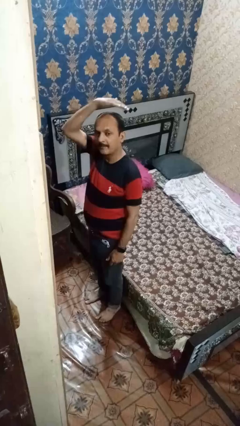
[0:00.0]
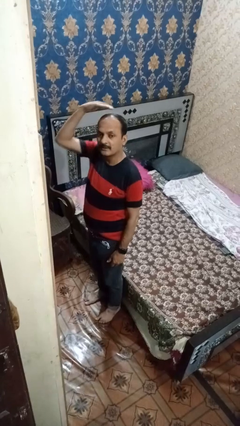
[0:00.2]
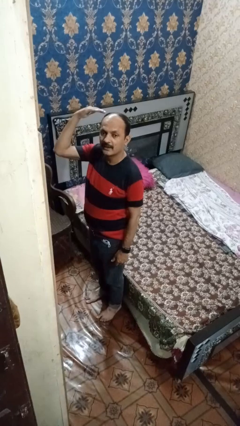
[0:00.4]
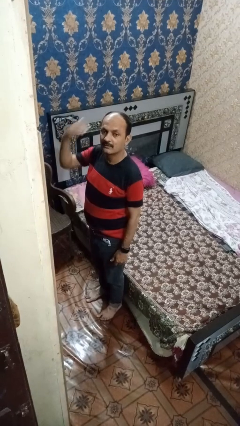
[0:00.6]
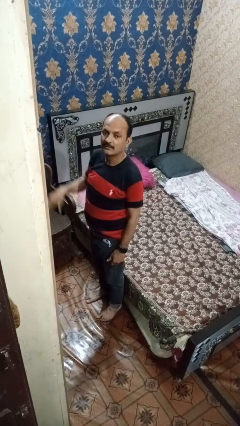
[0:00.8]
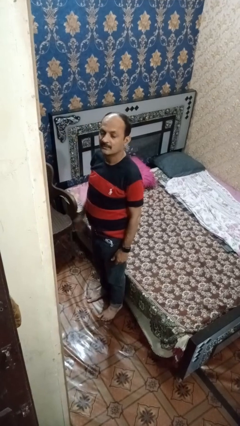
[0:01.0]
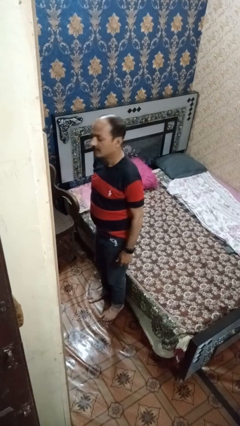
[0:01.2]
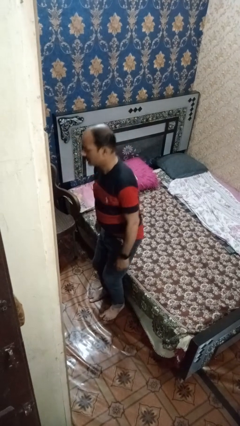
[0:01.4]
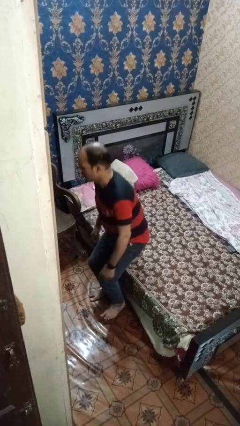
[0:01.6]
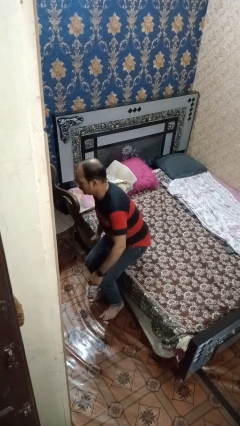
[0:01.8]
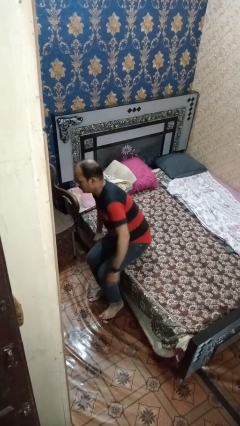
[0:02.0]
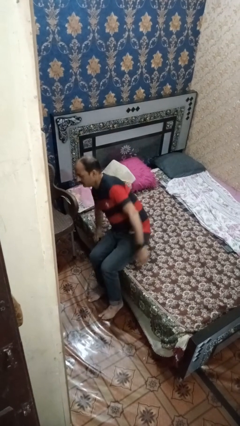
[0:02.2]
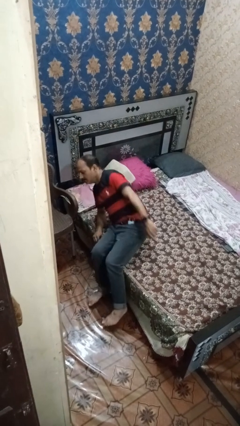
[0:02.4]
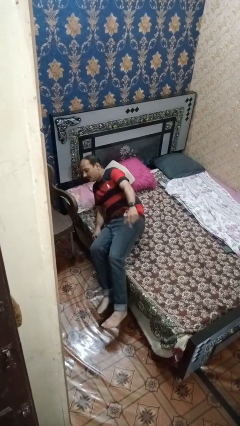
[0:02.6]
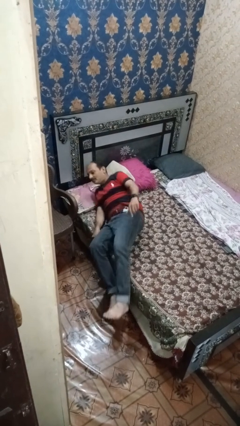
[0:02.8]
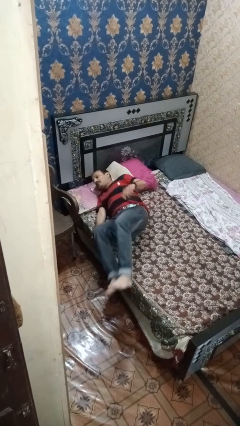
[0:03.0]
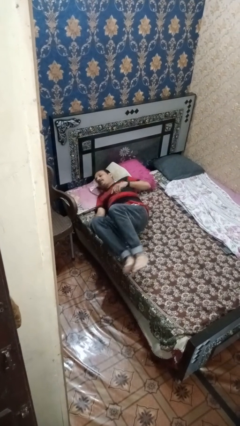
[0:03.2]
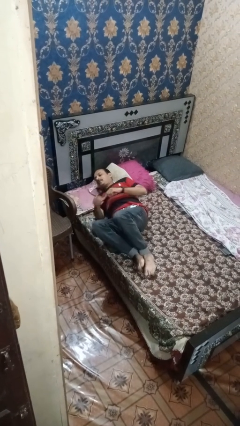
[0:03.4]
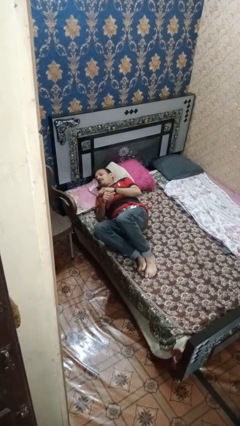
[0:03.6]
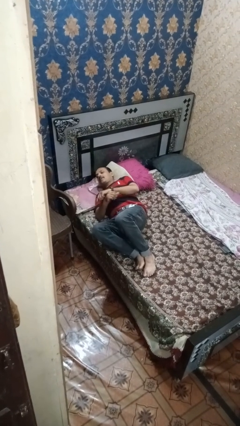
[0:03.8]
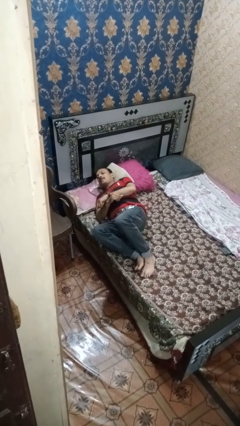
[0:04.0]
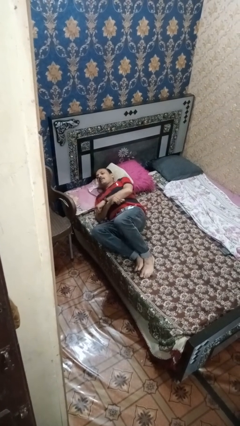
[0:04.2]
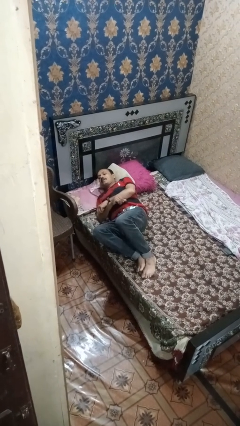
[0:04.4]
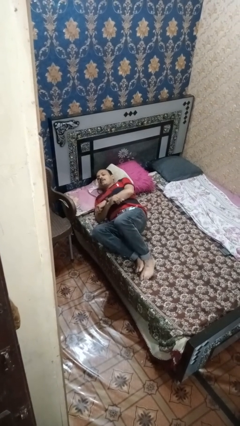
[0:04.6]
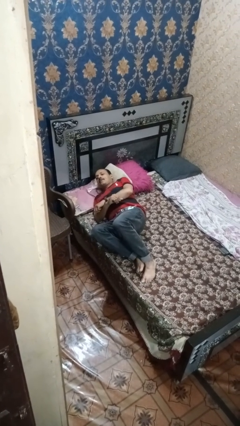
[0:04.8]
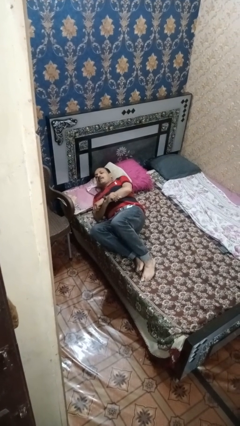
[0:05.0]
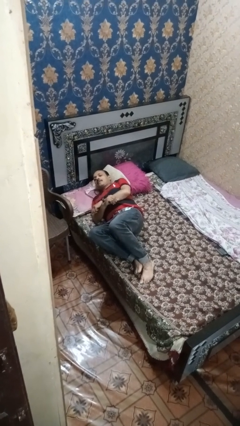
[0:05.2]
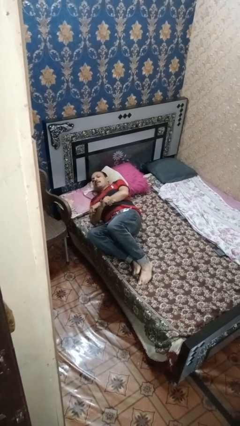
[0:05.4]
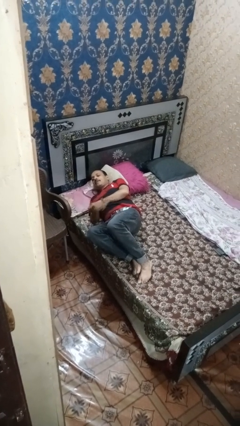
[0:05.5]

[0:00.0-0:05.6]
person lies down on bed

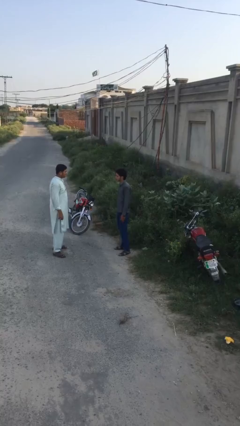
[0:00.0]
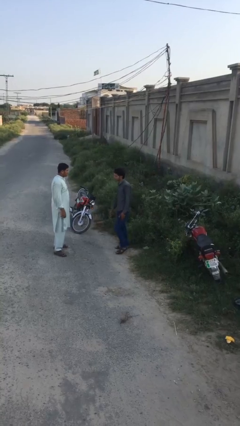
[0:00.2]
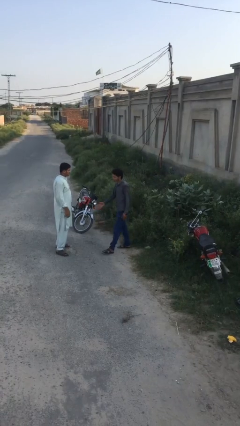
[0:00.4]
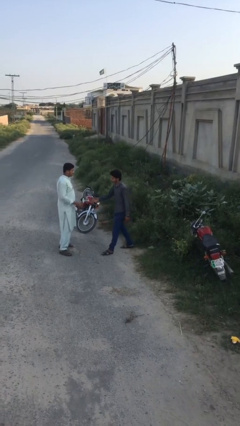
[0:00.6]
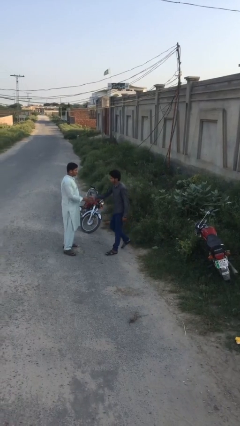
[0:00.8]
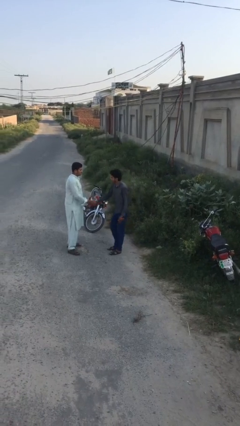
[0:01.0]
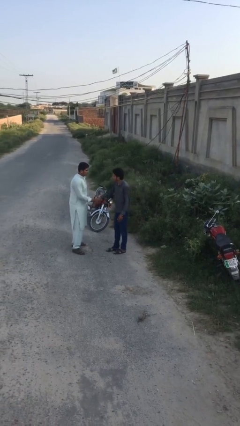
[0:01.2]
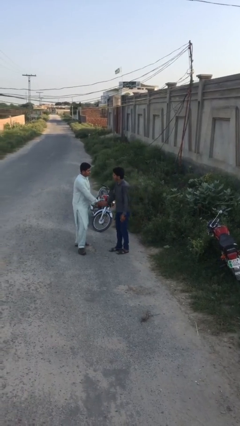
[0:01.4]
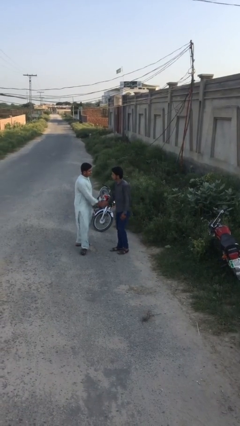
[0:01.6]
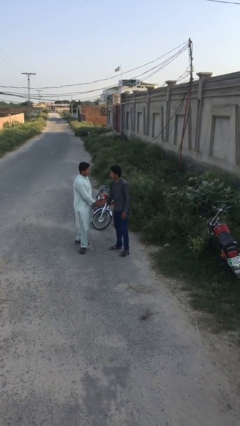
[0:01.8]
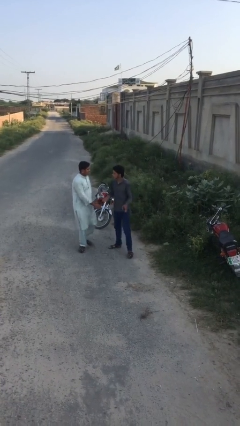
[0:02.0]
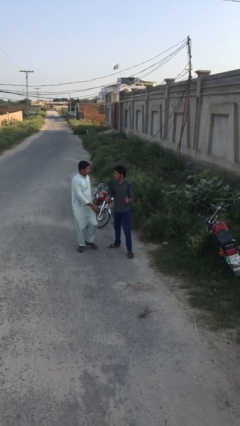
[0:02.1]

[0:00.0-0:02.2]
person shakes hand

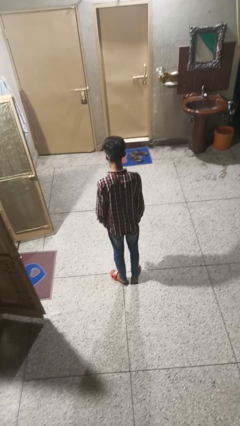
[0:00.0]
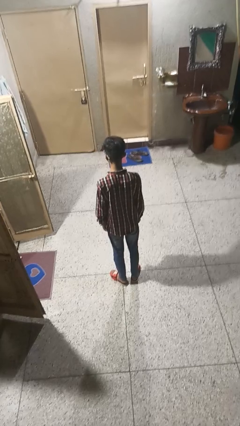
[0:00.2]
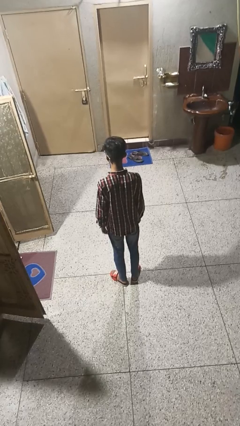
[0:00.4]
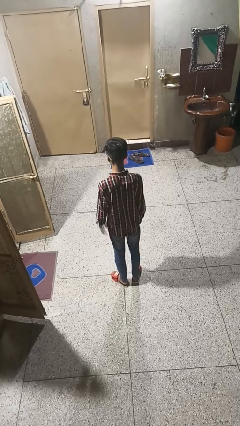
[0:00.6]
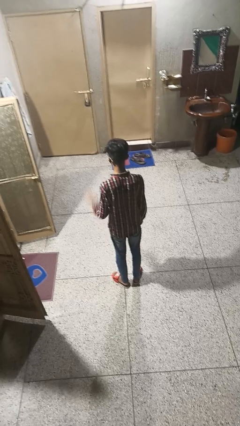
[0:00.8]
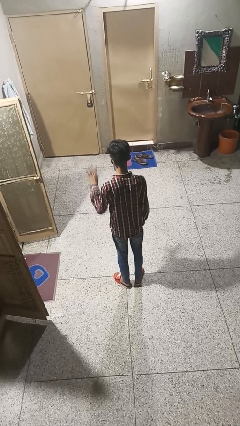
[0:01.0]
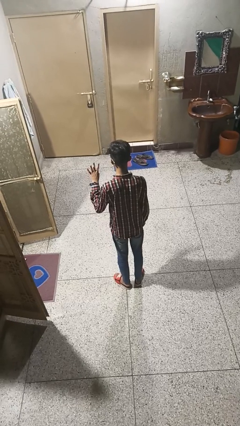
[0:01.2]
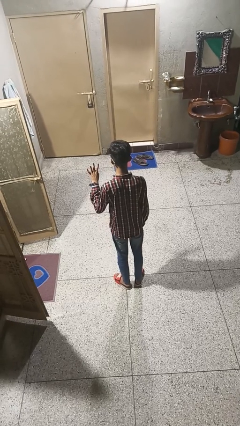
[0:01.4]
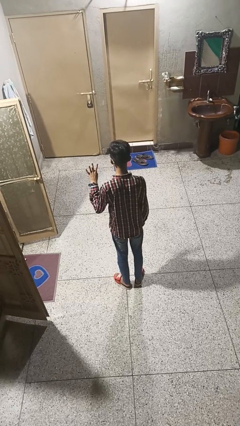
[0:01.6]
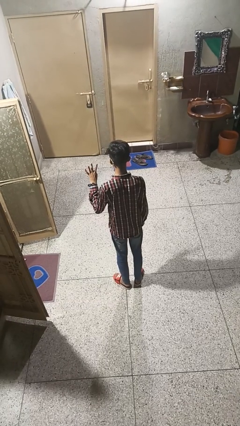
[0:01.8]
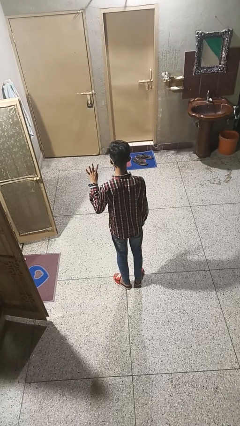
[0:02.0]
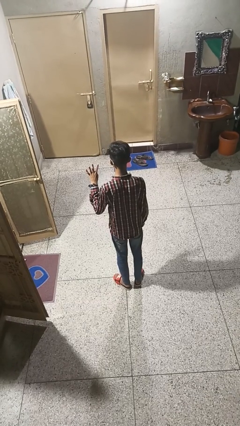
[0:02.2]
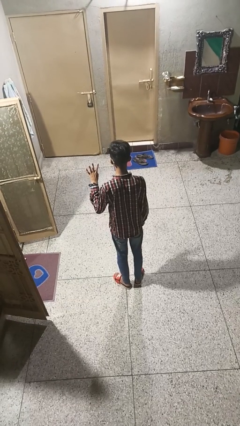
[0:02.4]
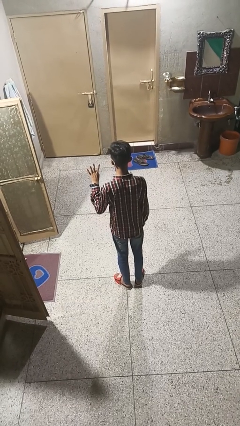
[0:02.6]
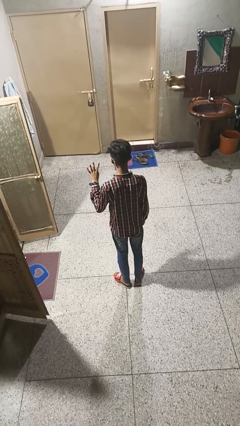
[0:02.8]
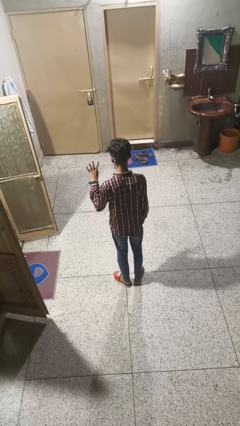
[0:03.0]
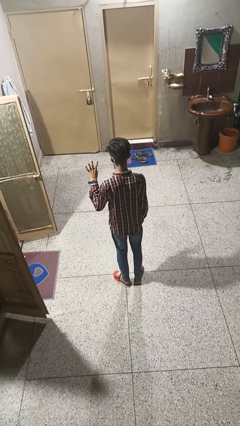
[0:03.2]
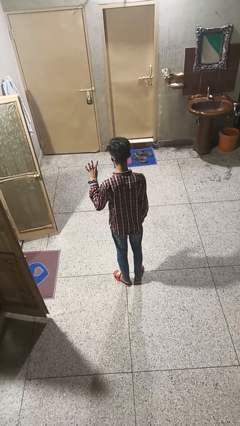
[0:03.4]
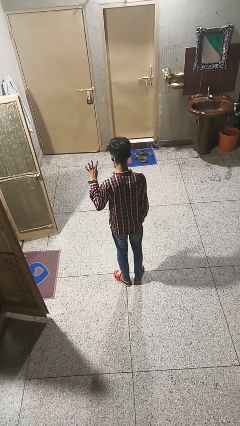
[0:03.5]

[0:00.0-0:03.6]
person gestures number four

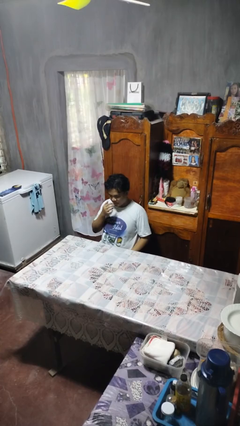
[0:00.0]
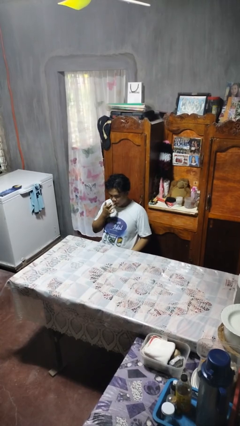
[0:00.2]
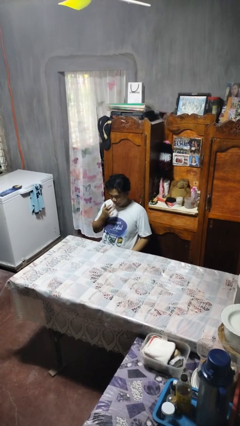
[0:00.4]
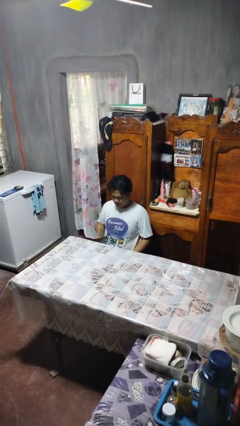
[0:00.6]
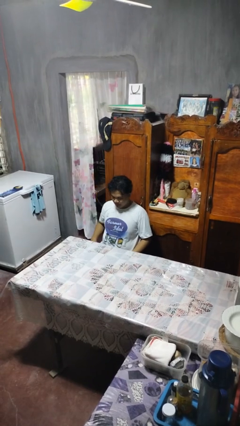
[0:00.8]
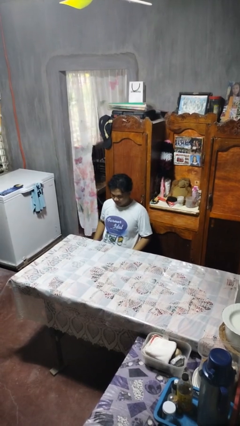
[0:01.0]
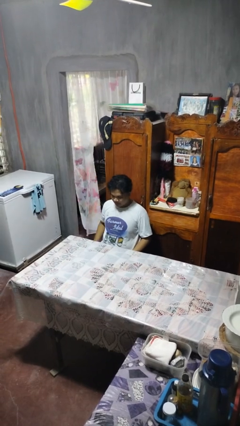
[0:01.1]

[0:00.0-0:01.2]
person licks fingers

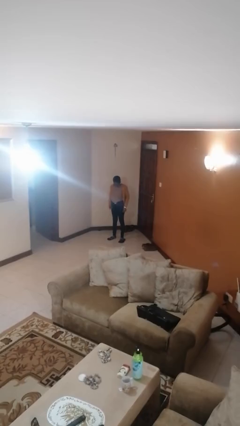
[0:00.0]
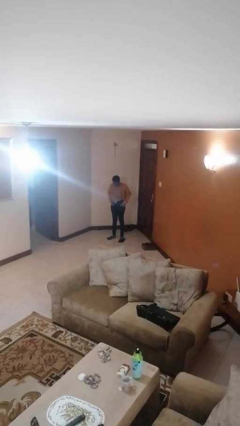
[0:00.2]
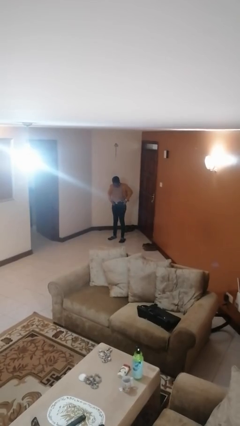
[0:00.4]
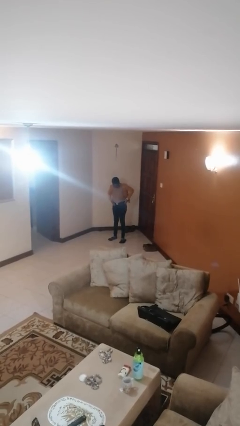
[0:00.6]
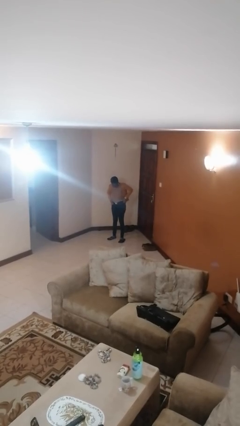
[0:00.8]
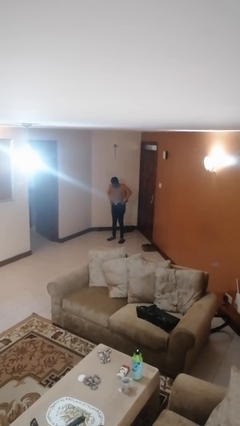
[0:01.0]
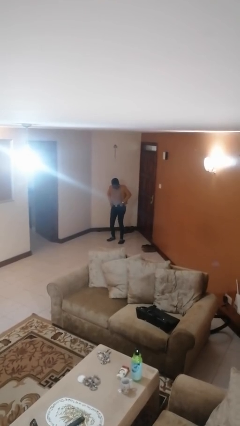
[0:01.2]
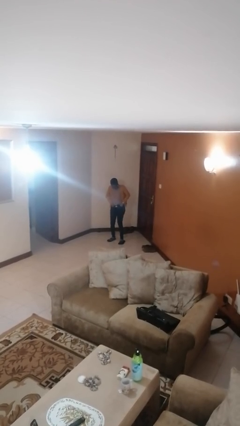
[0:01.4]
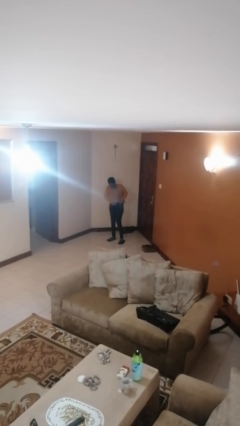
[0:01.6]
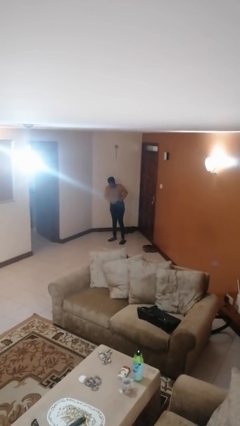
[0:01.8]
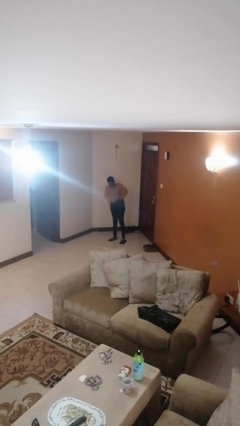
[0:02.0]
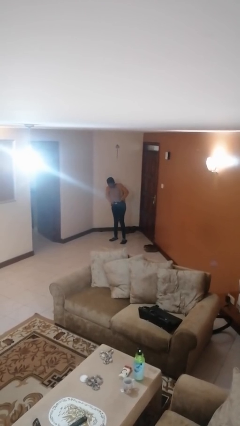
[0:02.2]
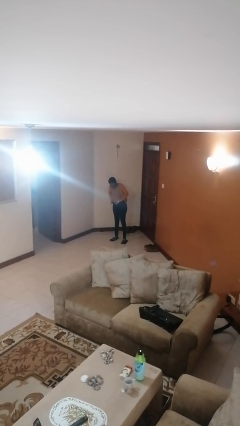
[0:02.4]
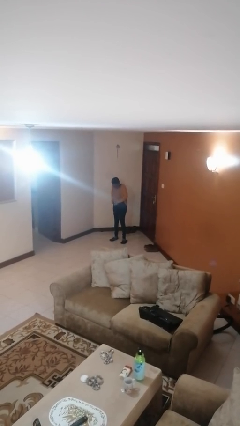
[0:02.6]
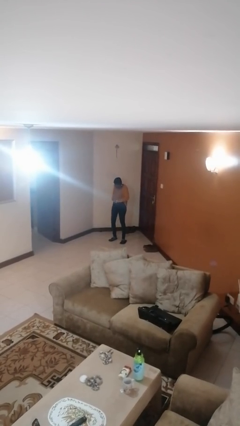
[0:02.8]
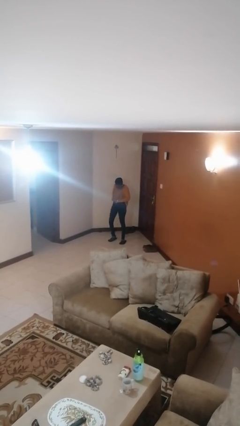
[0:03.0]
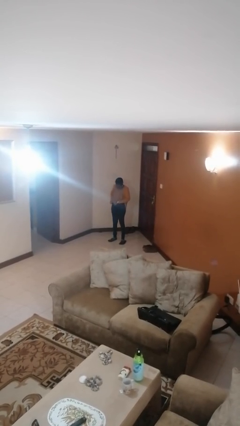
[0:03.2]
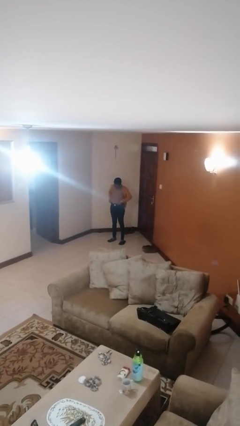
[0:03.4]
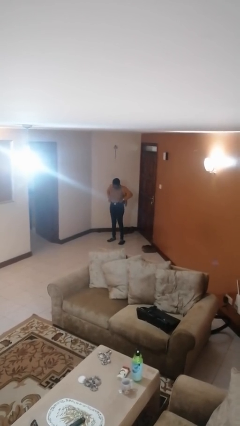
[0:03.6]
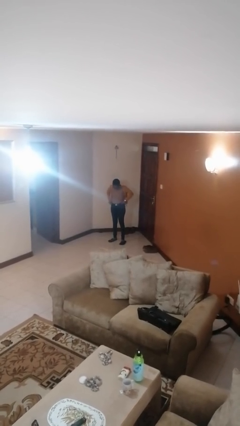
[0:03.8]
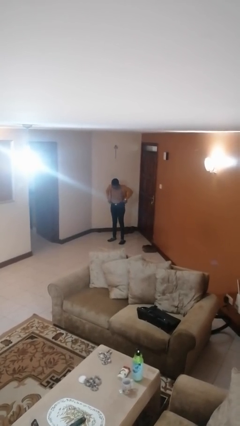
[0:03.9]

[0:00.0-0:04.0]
person hikes up pants

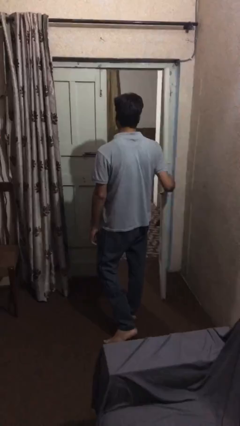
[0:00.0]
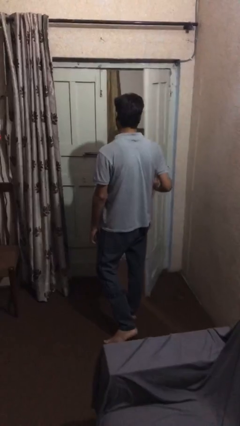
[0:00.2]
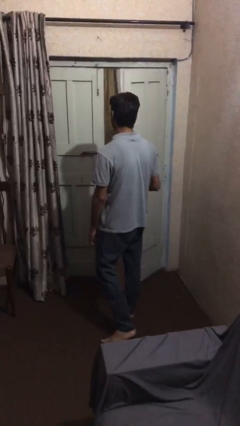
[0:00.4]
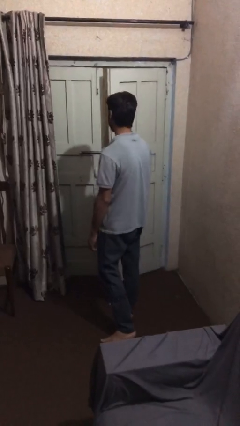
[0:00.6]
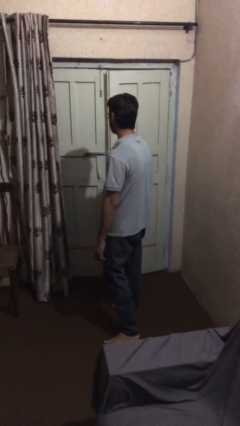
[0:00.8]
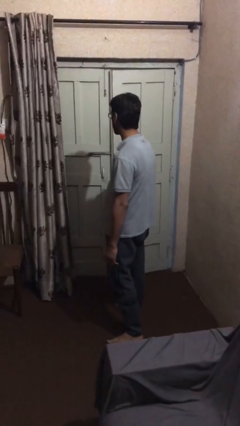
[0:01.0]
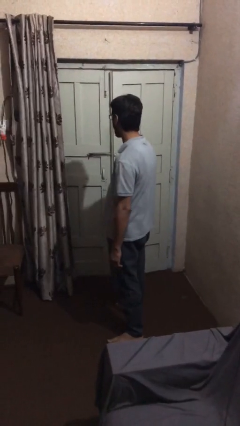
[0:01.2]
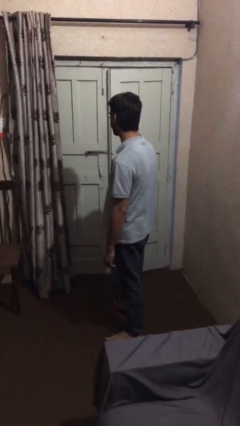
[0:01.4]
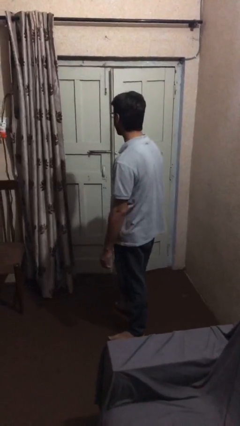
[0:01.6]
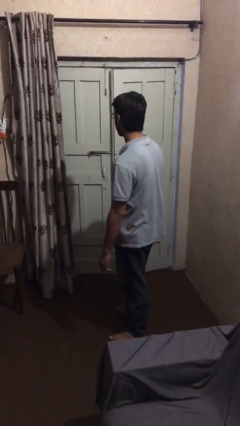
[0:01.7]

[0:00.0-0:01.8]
person closes facility door
